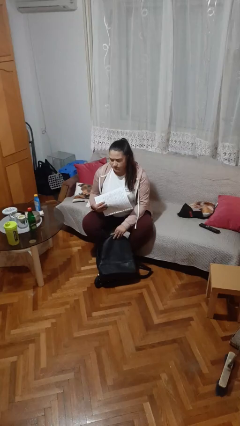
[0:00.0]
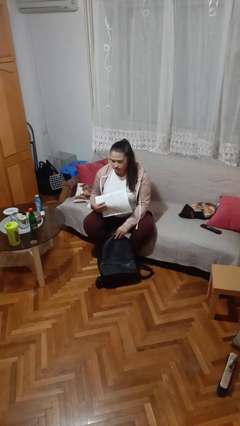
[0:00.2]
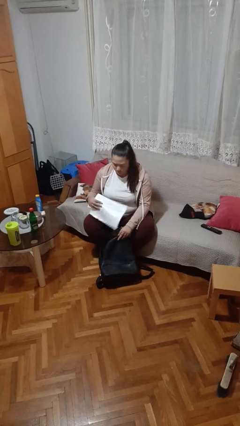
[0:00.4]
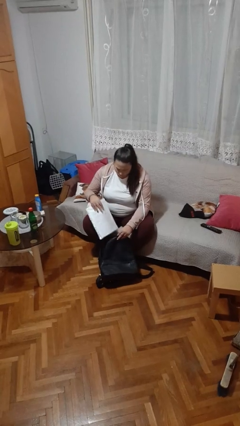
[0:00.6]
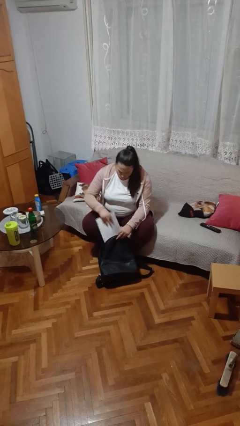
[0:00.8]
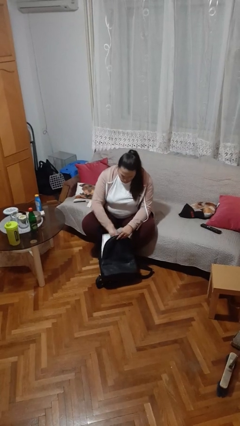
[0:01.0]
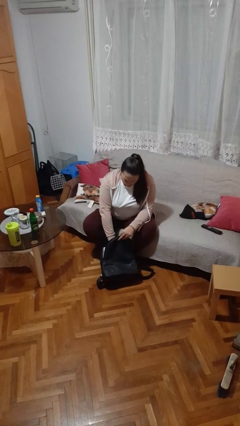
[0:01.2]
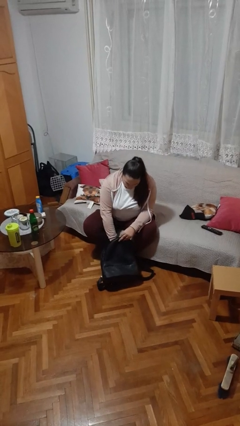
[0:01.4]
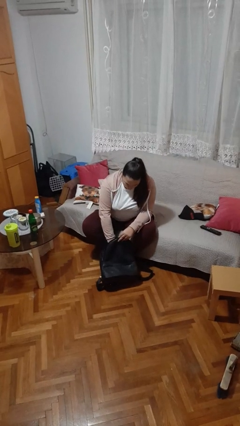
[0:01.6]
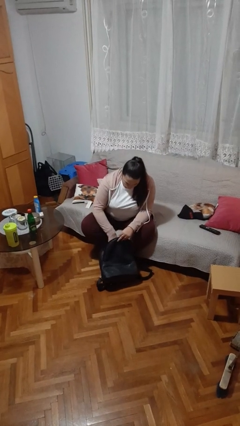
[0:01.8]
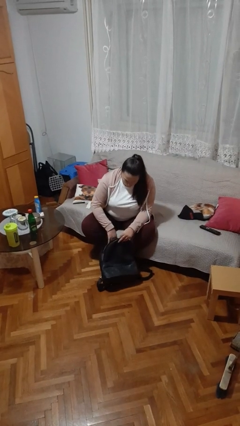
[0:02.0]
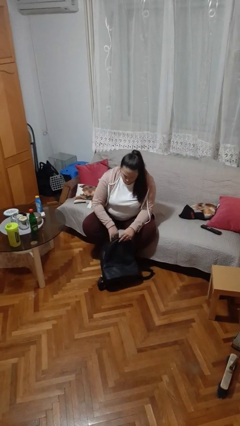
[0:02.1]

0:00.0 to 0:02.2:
person puts object into backpack

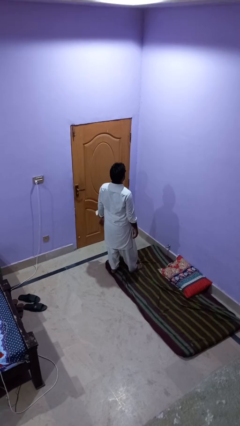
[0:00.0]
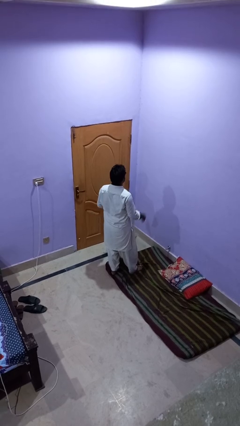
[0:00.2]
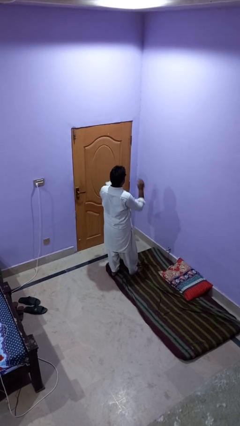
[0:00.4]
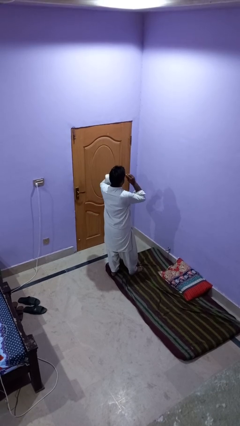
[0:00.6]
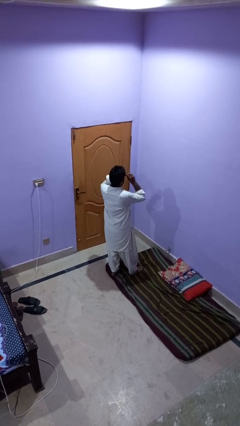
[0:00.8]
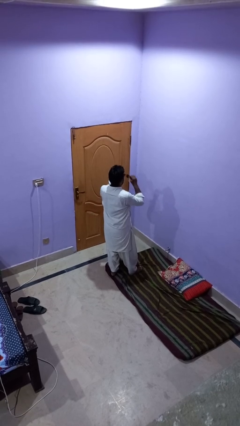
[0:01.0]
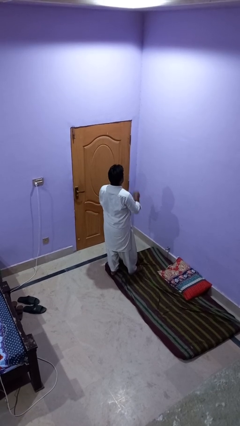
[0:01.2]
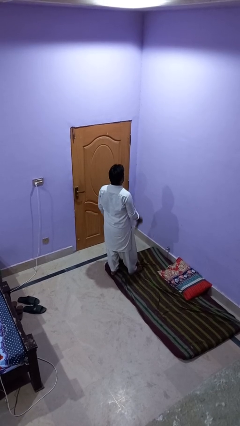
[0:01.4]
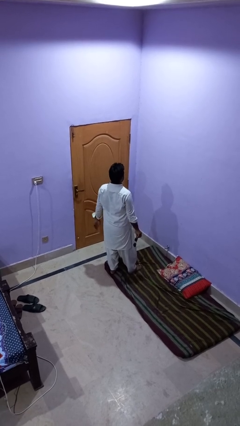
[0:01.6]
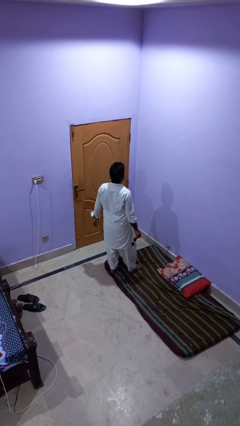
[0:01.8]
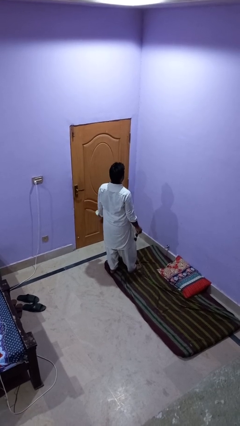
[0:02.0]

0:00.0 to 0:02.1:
person takes off sunglasses

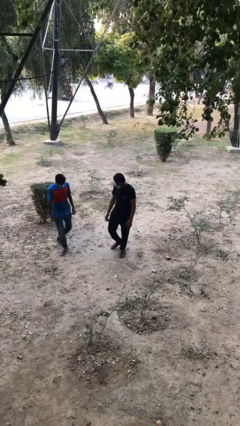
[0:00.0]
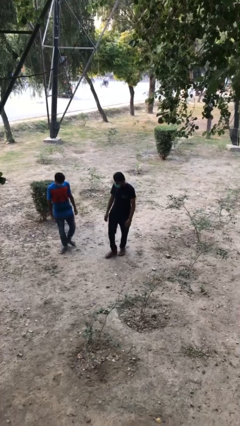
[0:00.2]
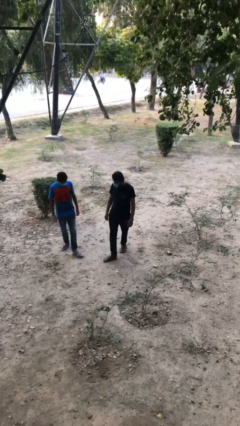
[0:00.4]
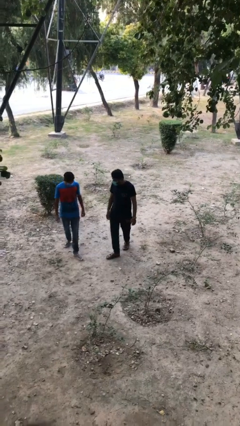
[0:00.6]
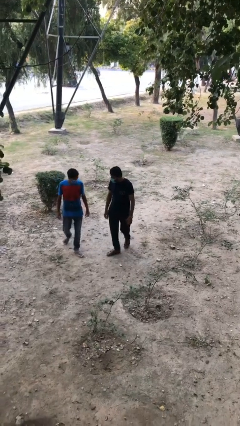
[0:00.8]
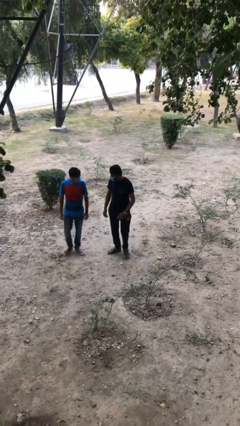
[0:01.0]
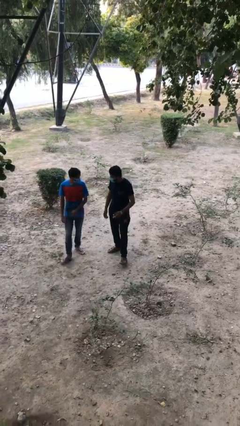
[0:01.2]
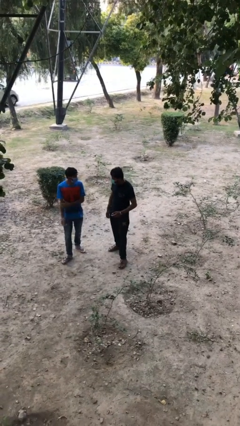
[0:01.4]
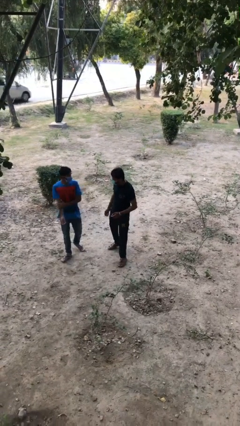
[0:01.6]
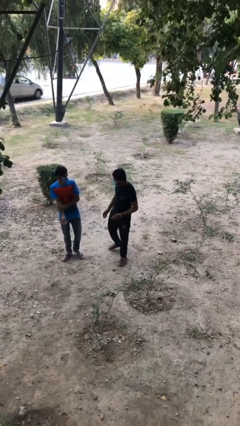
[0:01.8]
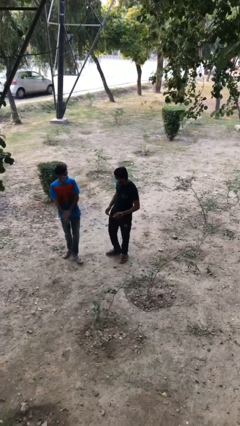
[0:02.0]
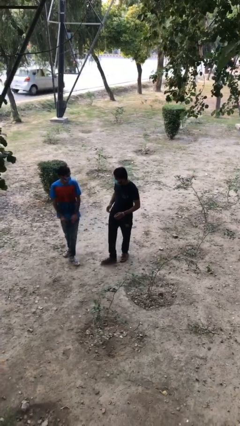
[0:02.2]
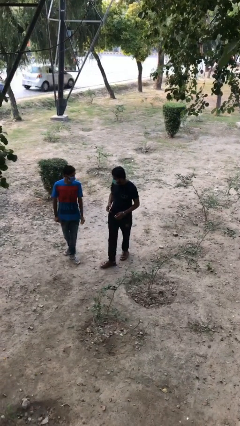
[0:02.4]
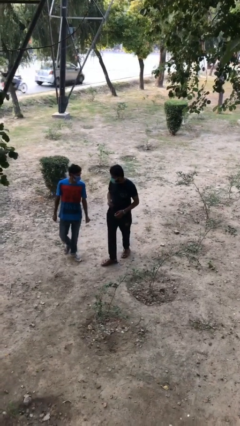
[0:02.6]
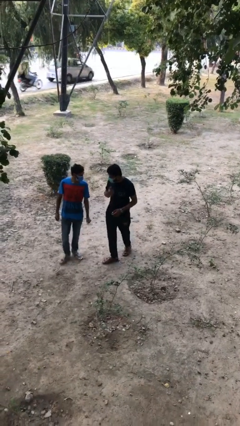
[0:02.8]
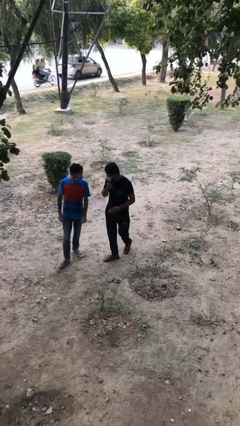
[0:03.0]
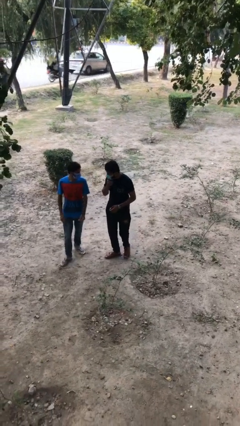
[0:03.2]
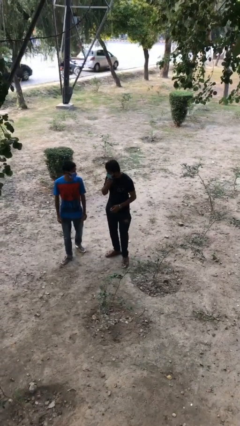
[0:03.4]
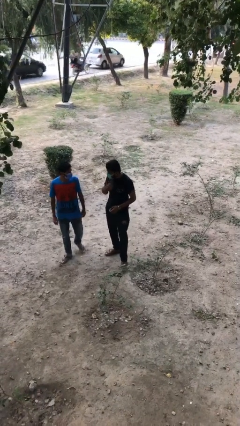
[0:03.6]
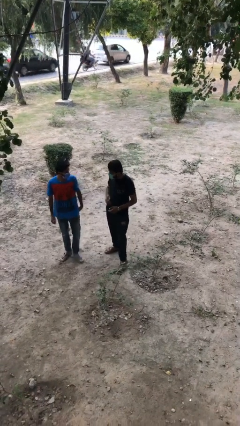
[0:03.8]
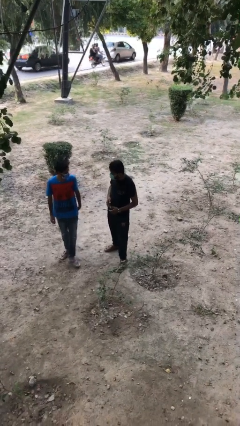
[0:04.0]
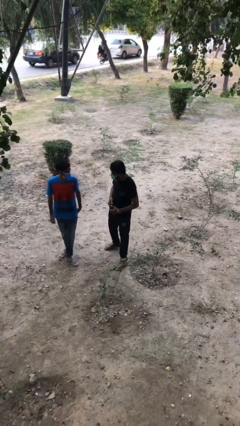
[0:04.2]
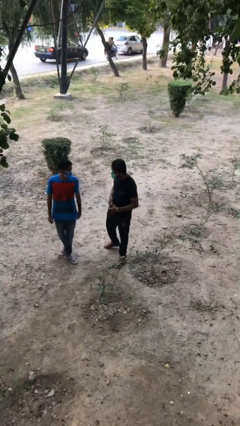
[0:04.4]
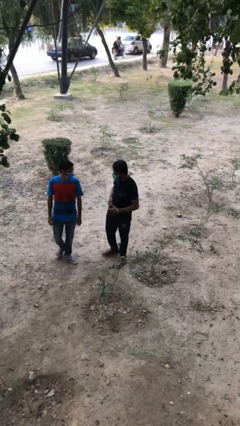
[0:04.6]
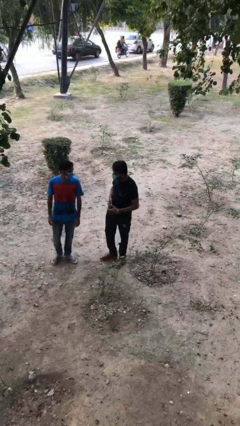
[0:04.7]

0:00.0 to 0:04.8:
person talks to person

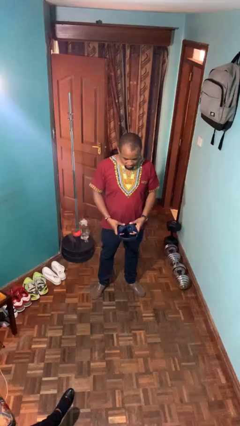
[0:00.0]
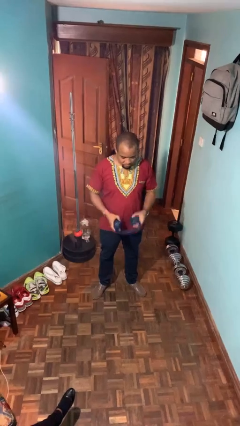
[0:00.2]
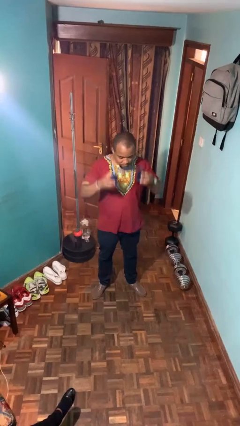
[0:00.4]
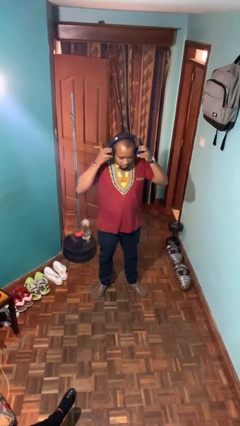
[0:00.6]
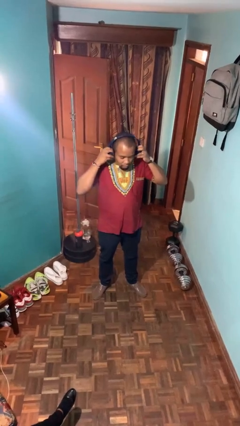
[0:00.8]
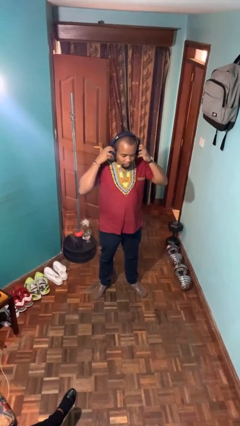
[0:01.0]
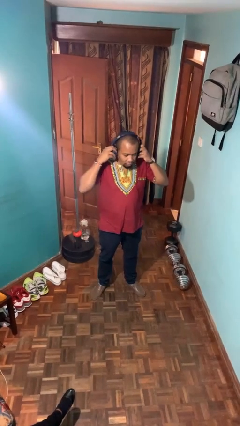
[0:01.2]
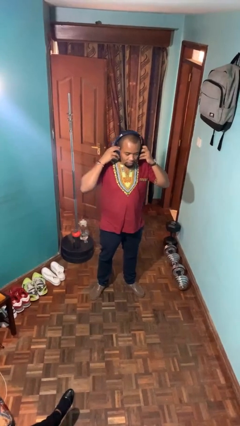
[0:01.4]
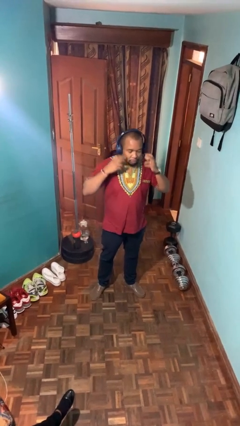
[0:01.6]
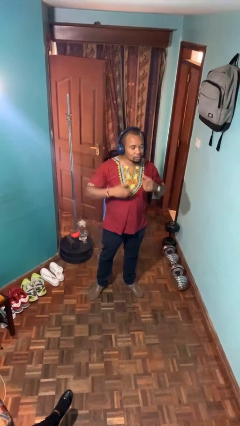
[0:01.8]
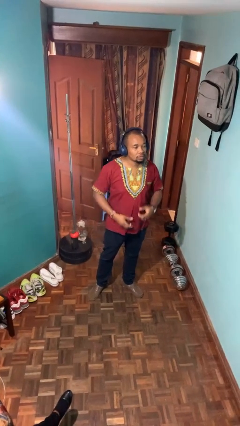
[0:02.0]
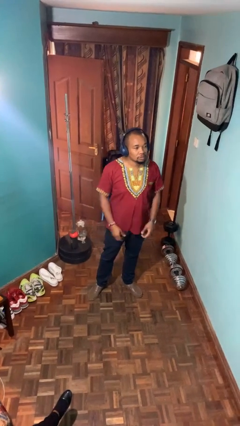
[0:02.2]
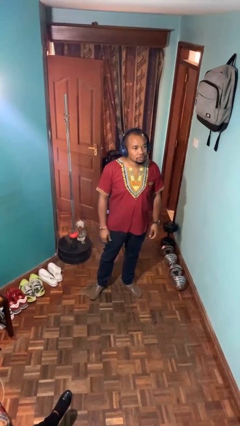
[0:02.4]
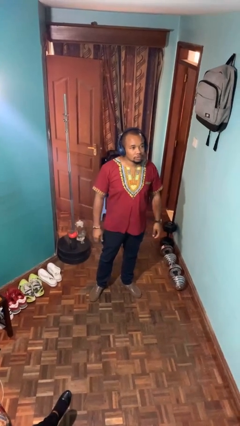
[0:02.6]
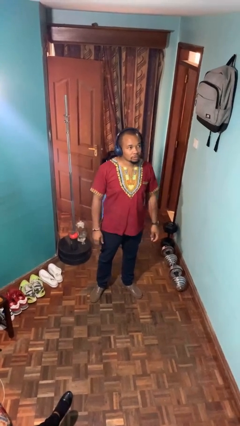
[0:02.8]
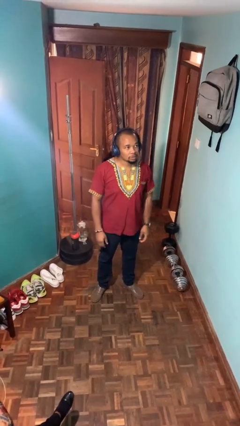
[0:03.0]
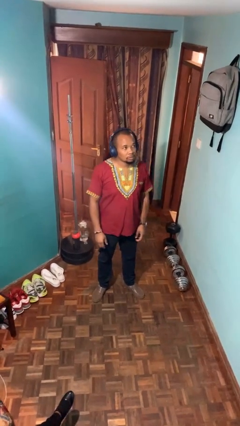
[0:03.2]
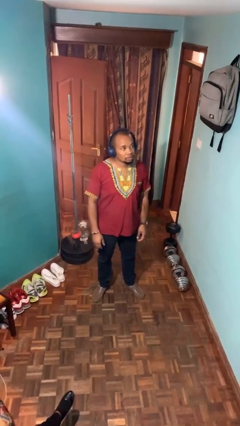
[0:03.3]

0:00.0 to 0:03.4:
person puts on headphones

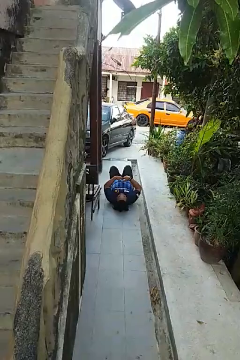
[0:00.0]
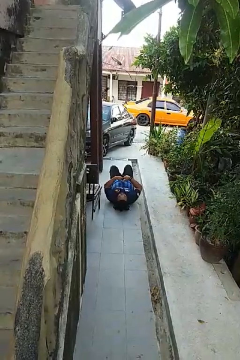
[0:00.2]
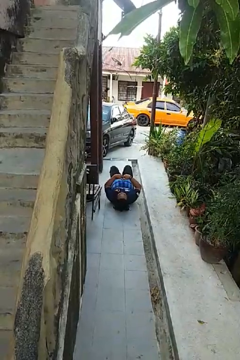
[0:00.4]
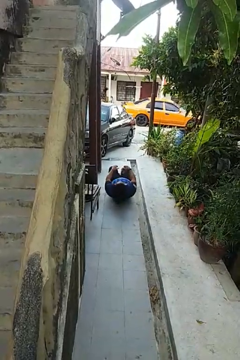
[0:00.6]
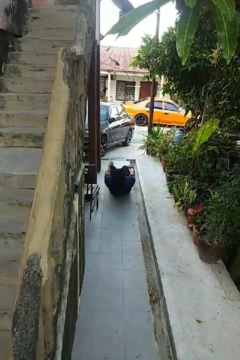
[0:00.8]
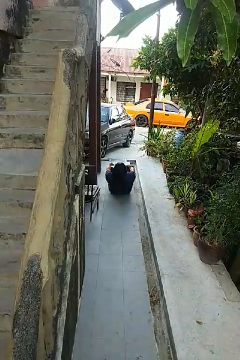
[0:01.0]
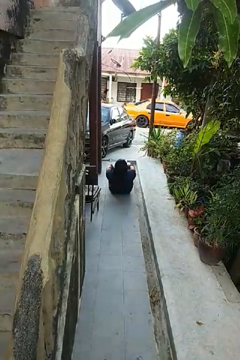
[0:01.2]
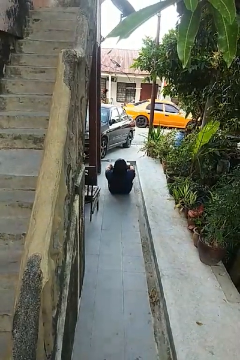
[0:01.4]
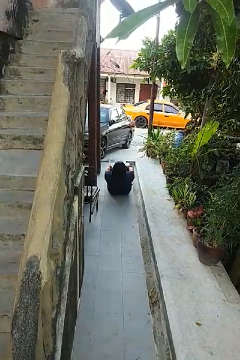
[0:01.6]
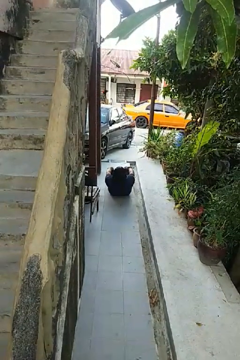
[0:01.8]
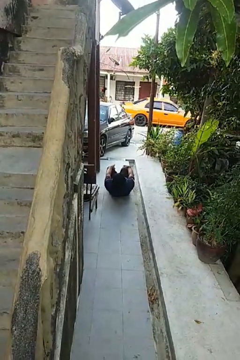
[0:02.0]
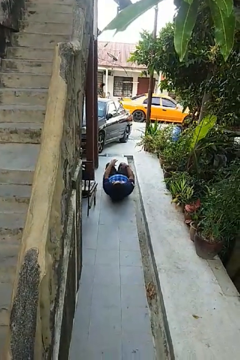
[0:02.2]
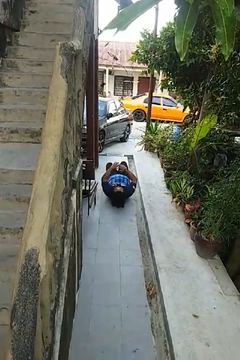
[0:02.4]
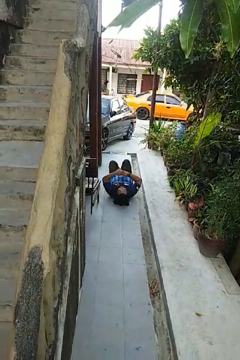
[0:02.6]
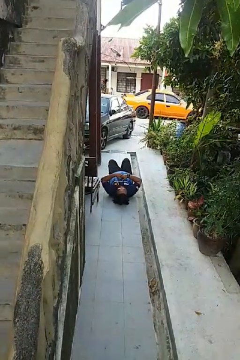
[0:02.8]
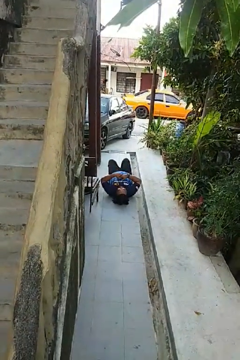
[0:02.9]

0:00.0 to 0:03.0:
person exercises with situp

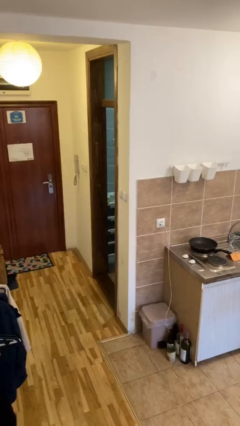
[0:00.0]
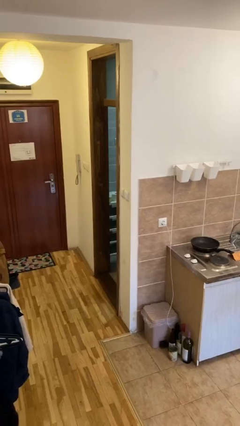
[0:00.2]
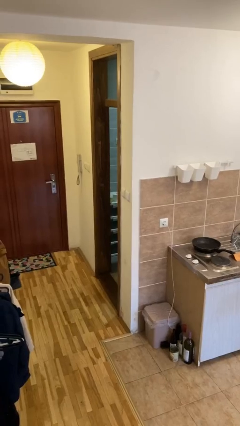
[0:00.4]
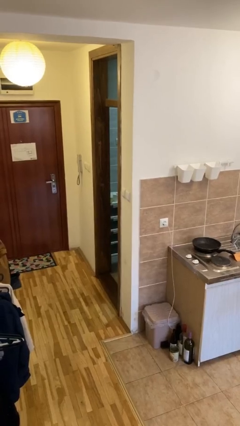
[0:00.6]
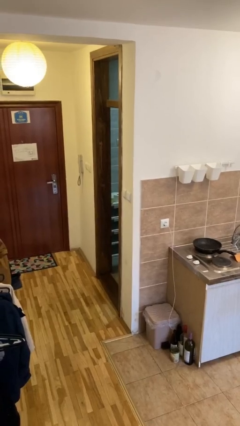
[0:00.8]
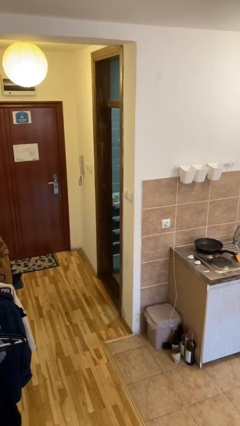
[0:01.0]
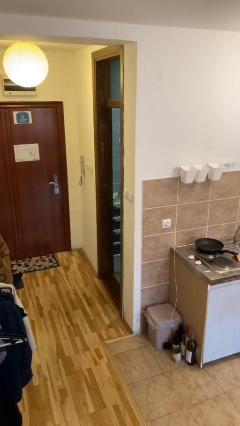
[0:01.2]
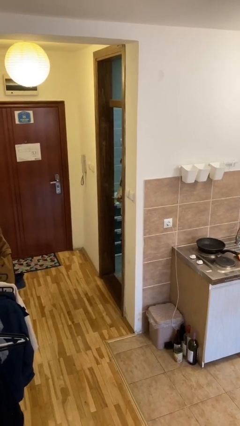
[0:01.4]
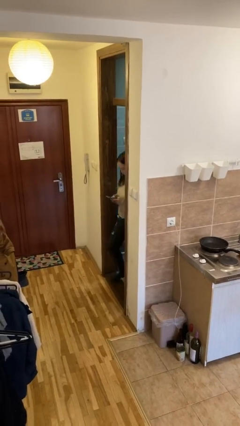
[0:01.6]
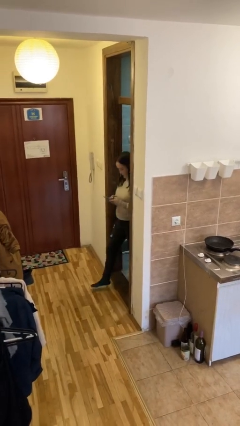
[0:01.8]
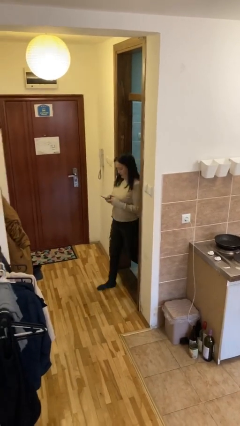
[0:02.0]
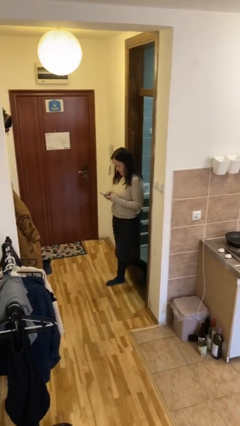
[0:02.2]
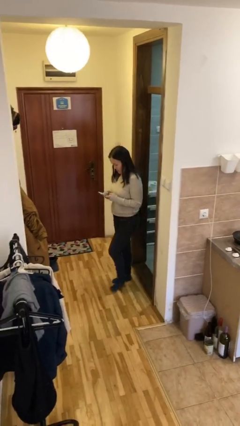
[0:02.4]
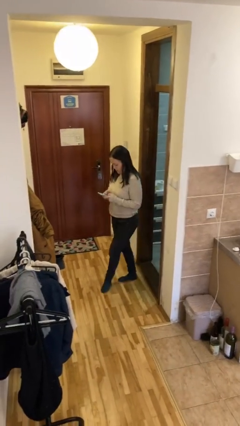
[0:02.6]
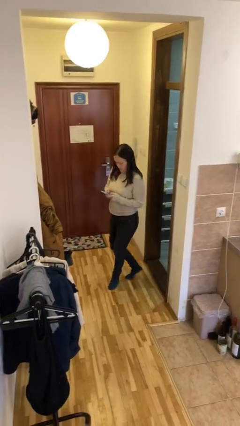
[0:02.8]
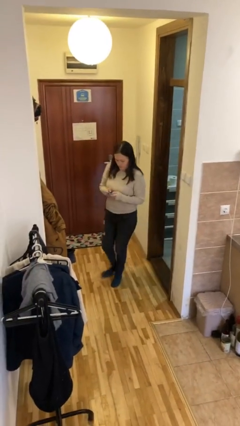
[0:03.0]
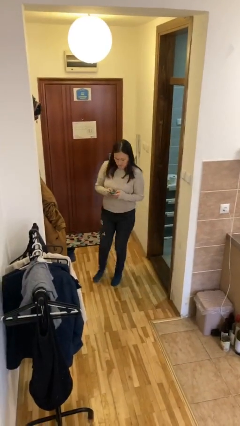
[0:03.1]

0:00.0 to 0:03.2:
person enters scene through structure
